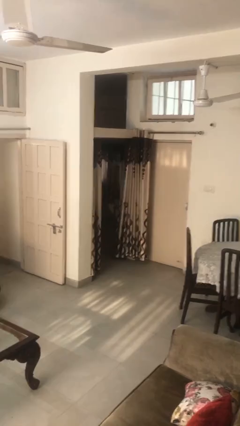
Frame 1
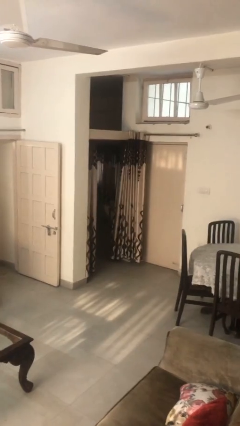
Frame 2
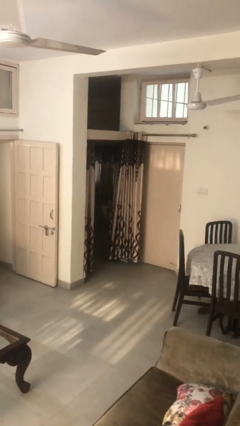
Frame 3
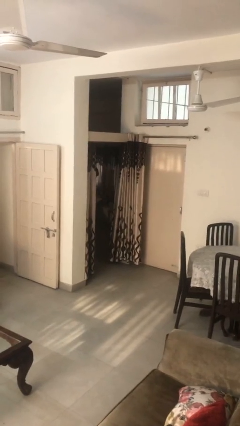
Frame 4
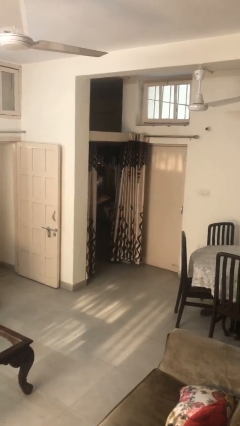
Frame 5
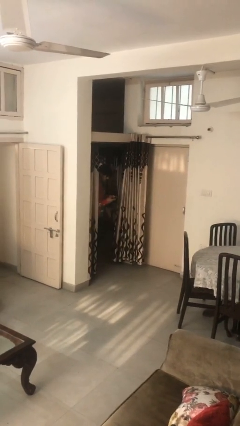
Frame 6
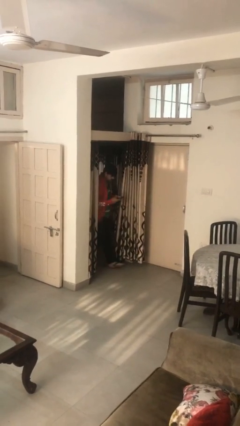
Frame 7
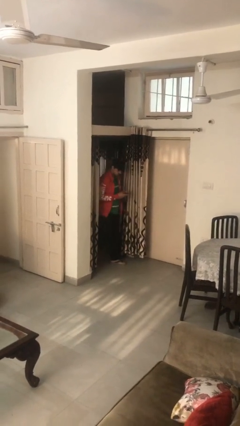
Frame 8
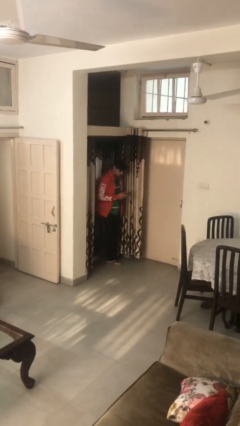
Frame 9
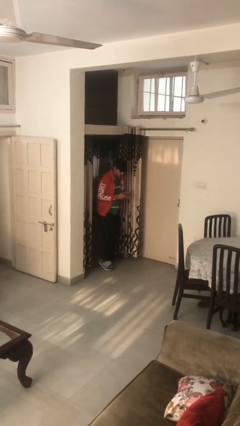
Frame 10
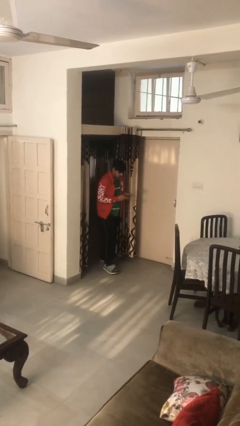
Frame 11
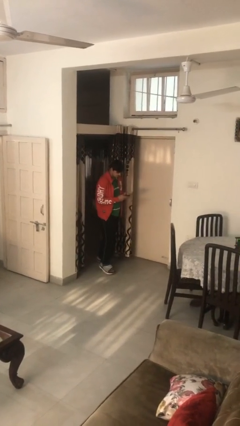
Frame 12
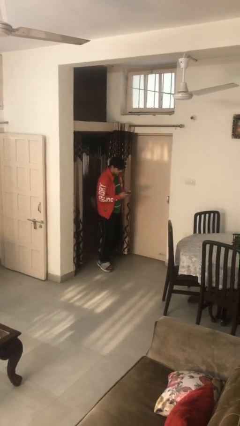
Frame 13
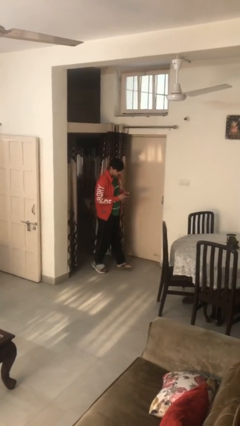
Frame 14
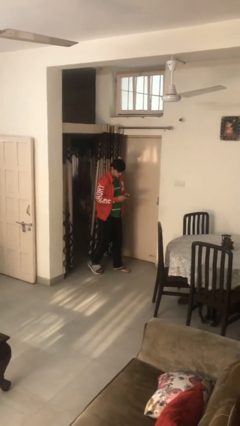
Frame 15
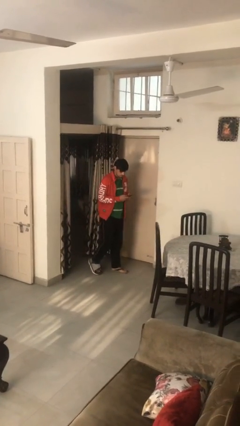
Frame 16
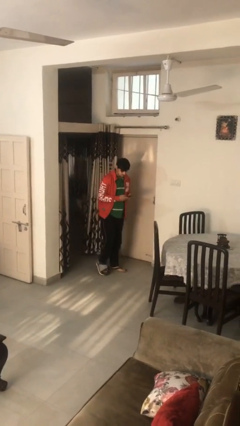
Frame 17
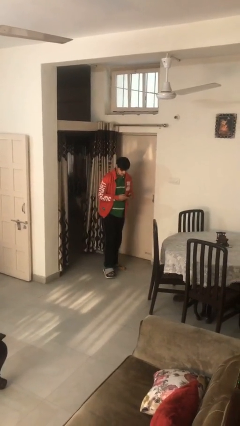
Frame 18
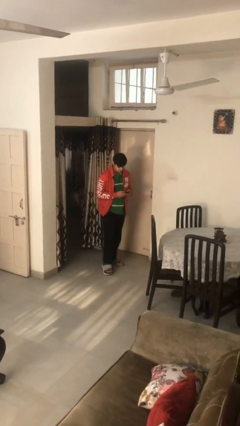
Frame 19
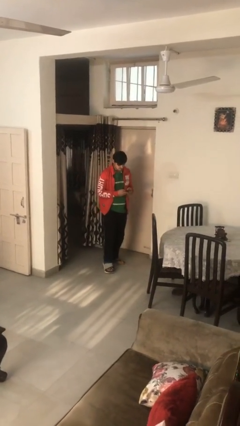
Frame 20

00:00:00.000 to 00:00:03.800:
person enters scene through structure

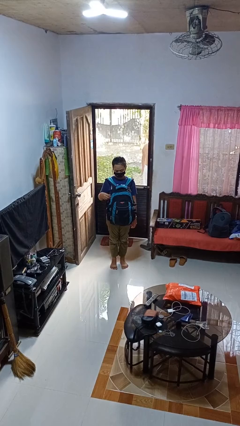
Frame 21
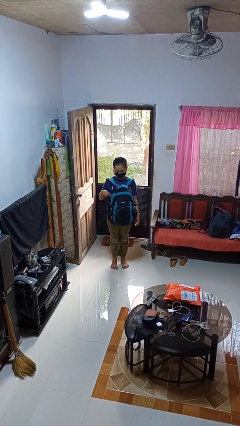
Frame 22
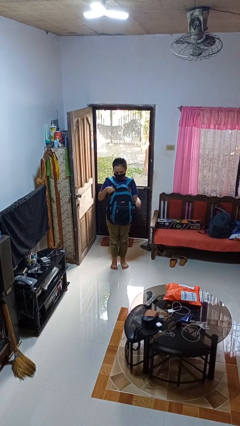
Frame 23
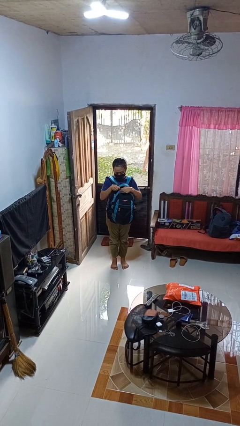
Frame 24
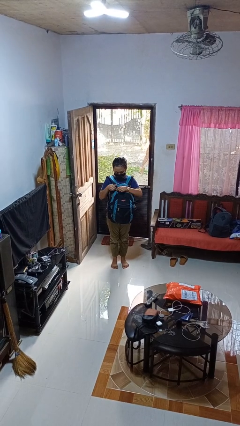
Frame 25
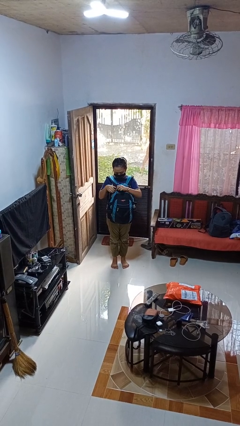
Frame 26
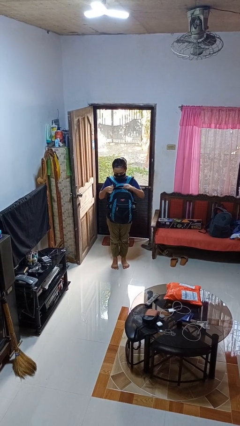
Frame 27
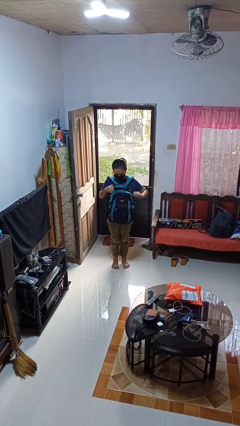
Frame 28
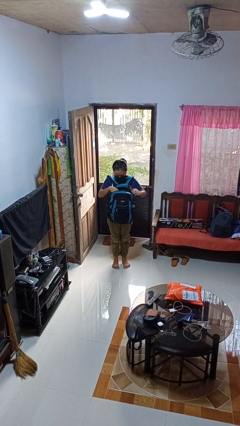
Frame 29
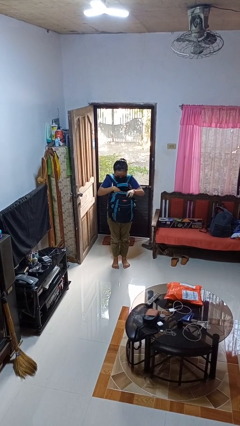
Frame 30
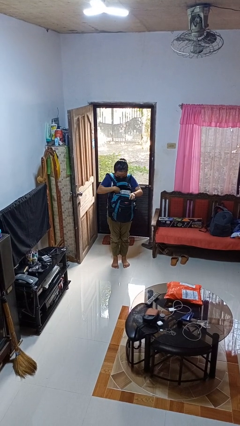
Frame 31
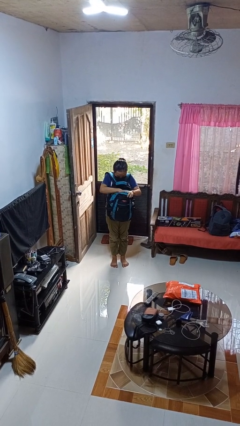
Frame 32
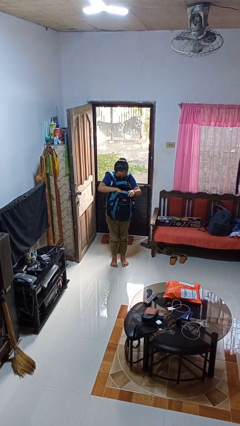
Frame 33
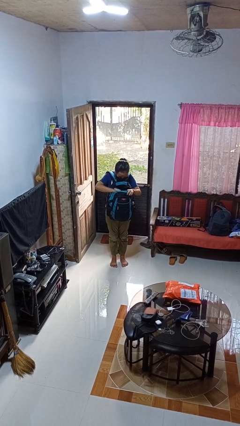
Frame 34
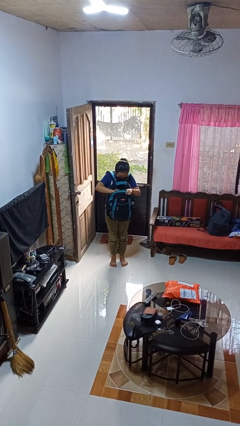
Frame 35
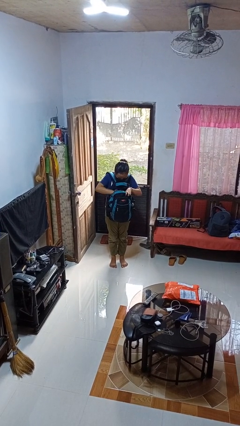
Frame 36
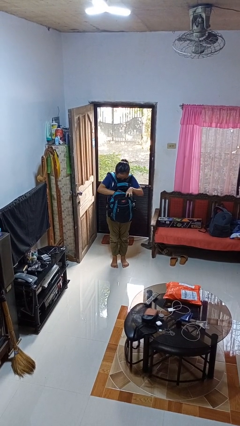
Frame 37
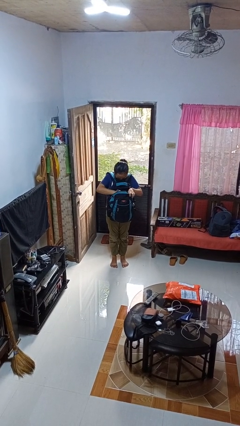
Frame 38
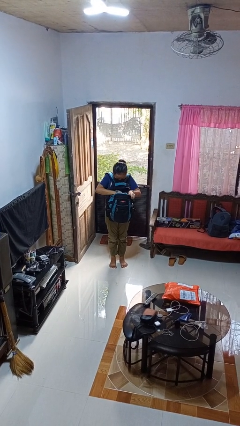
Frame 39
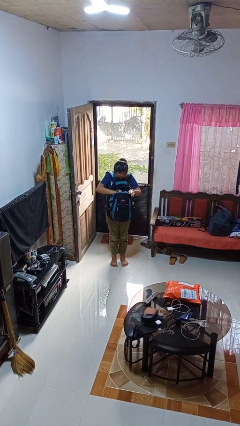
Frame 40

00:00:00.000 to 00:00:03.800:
person searches in backpack

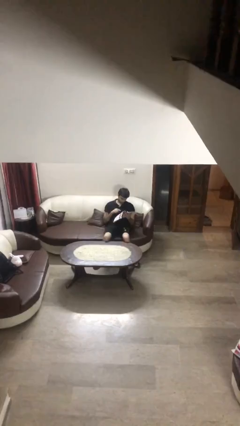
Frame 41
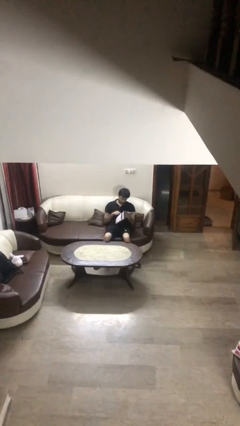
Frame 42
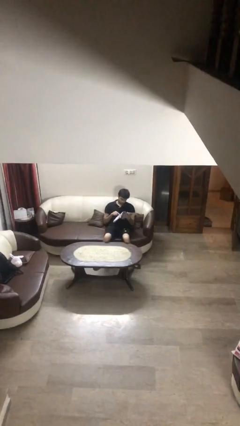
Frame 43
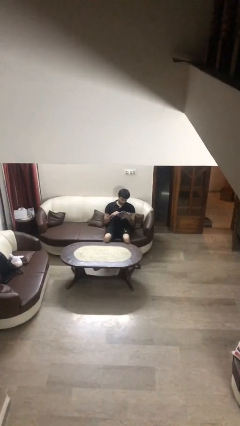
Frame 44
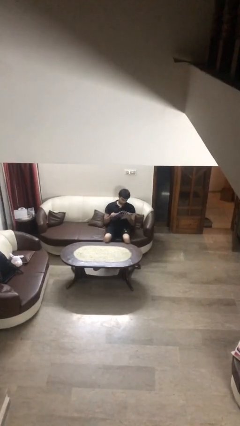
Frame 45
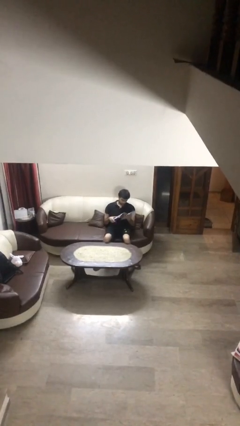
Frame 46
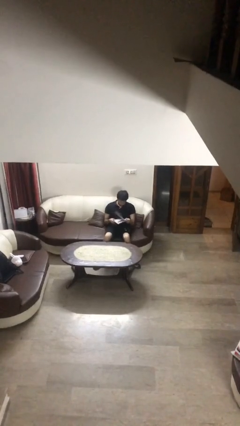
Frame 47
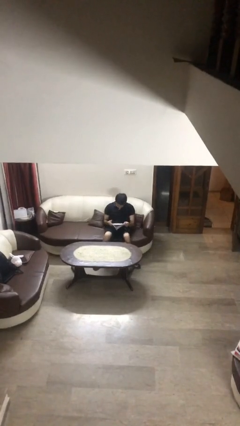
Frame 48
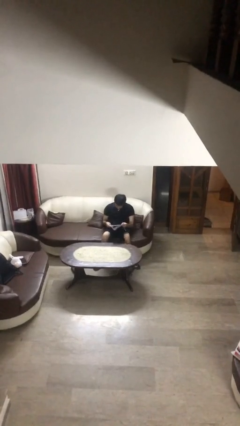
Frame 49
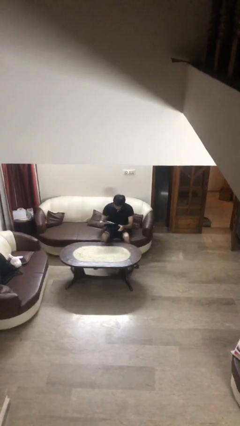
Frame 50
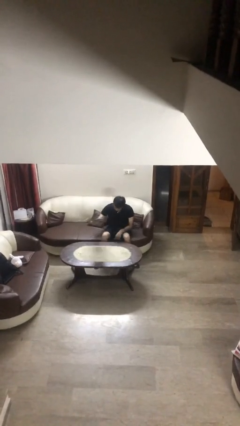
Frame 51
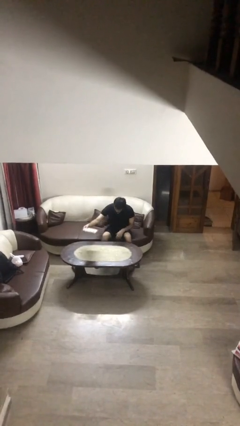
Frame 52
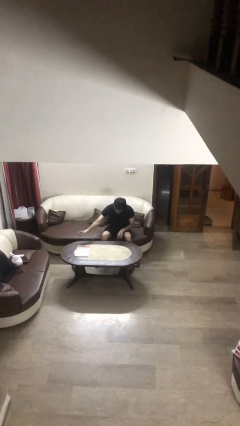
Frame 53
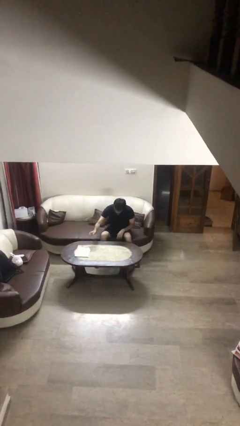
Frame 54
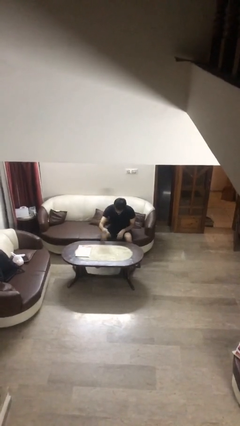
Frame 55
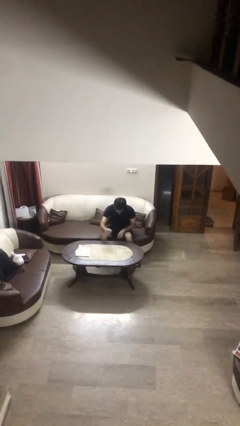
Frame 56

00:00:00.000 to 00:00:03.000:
person puts down object on table

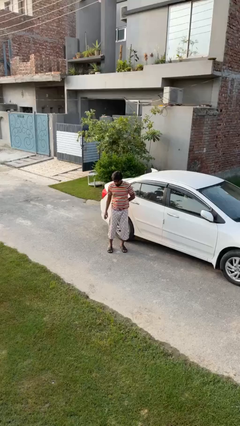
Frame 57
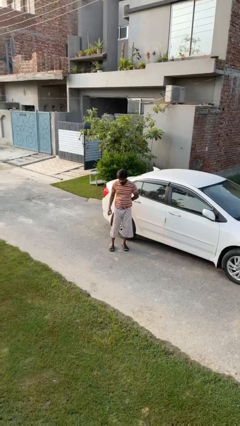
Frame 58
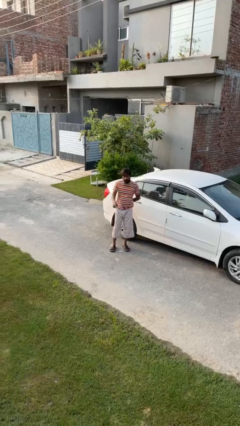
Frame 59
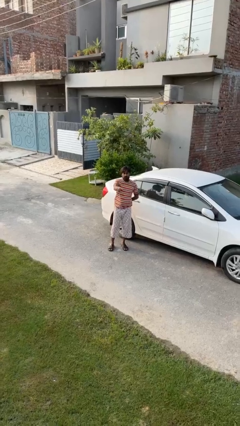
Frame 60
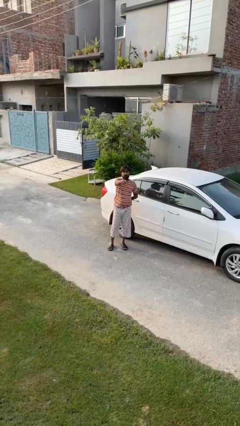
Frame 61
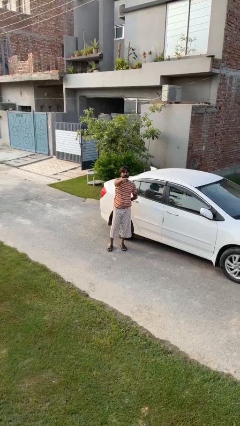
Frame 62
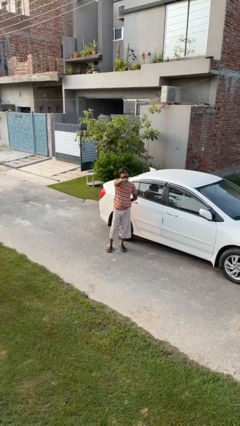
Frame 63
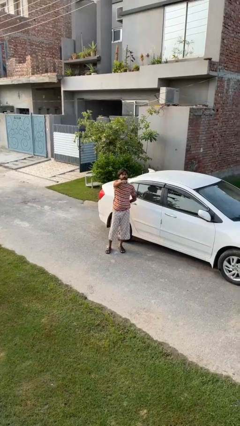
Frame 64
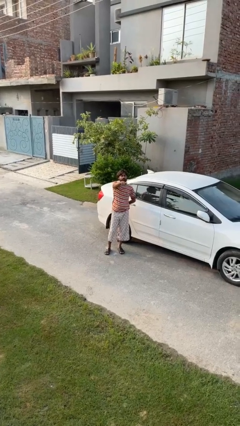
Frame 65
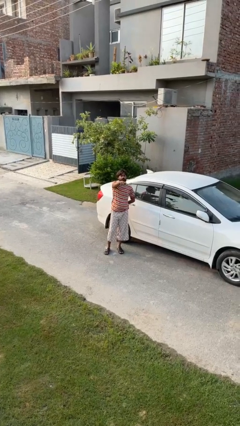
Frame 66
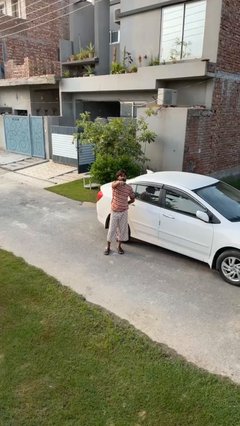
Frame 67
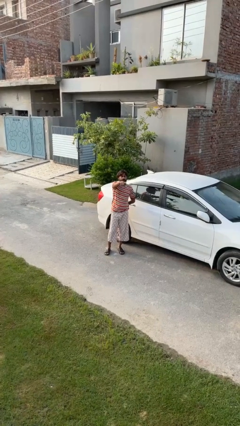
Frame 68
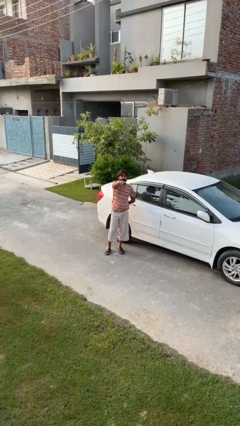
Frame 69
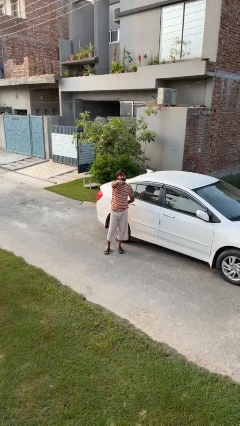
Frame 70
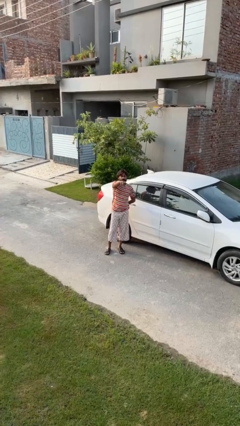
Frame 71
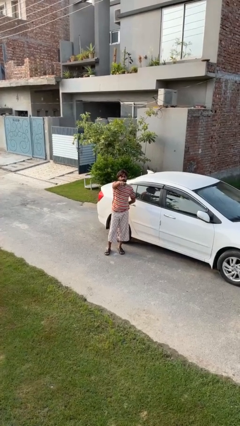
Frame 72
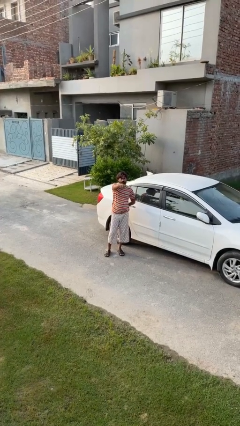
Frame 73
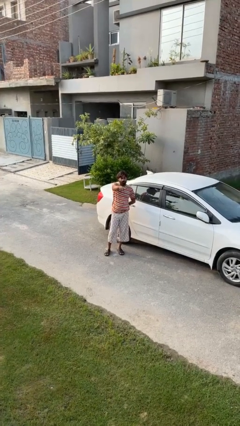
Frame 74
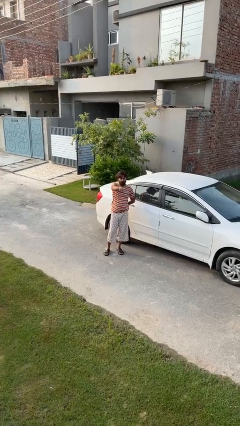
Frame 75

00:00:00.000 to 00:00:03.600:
person points at person

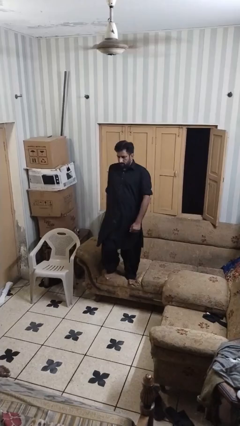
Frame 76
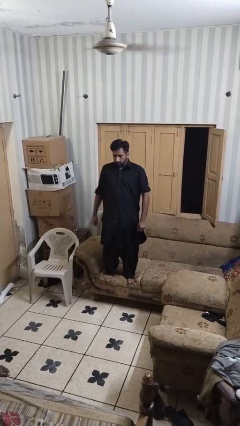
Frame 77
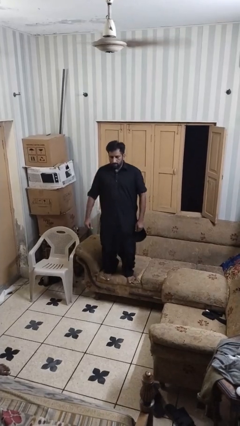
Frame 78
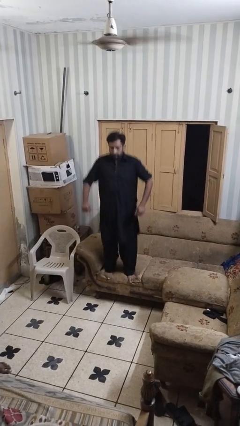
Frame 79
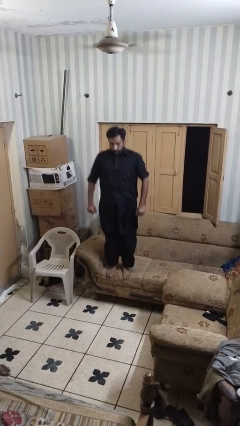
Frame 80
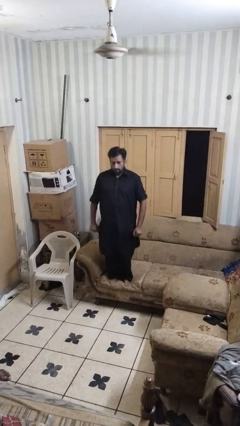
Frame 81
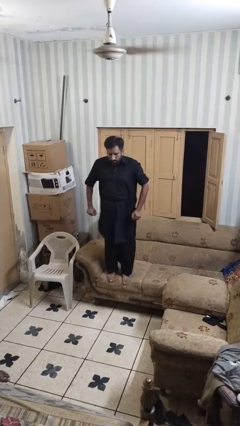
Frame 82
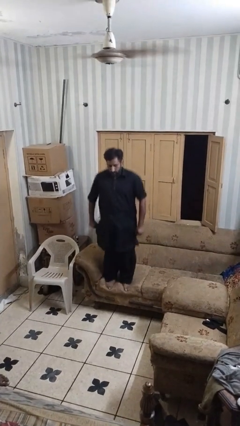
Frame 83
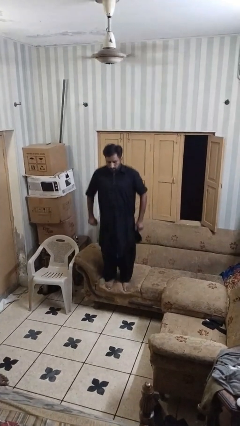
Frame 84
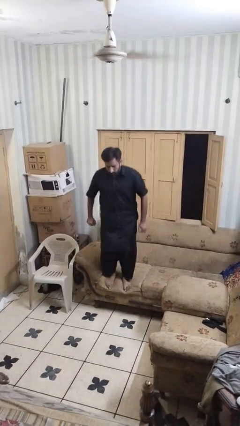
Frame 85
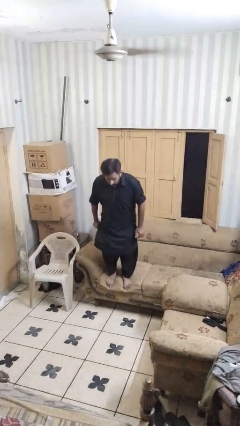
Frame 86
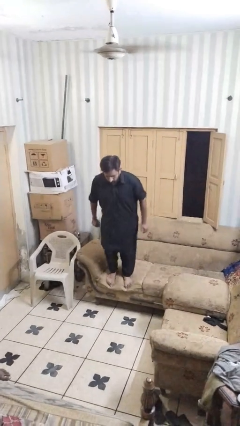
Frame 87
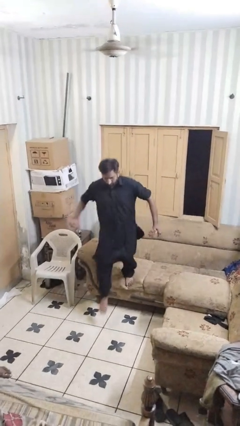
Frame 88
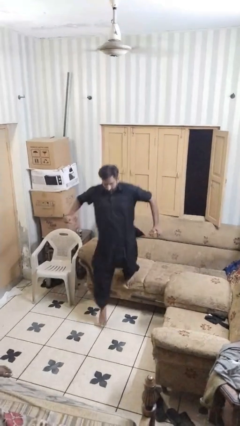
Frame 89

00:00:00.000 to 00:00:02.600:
person jumps on couch

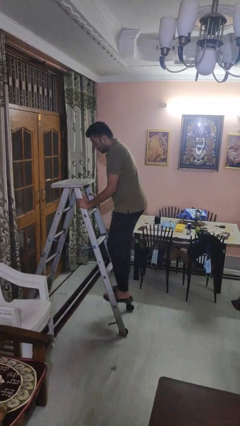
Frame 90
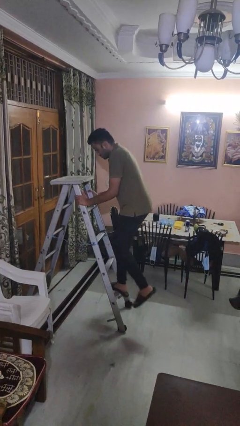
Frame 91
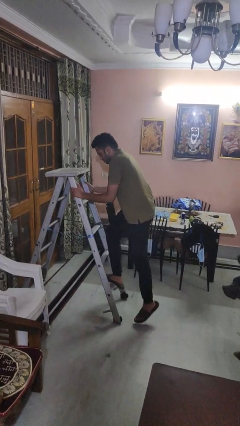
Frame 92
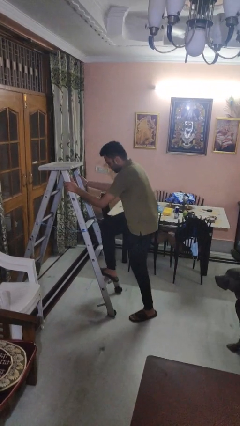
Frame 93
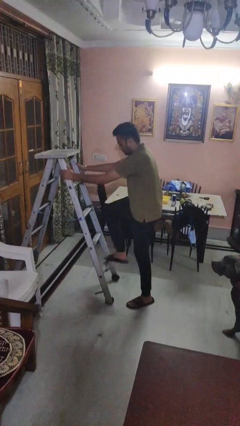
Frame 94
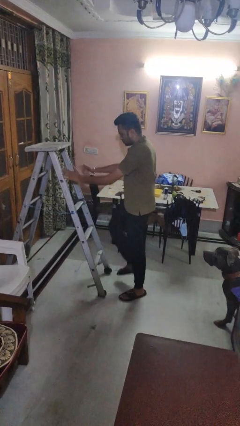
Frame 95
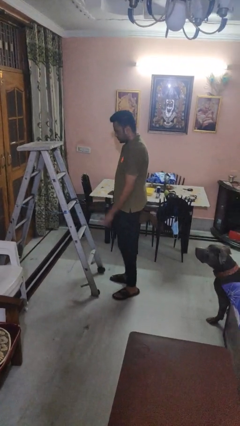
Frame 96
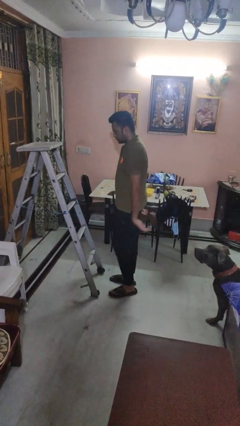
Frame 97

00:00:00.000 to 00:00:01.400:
person climbs down ladder
